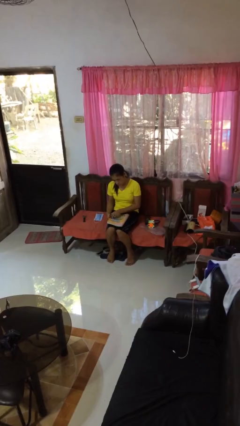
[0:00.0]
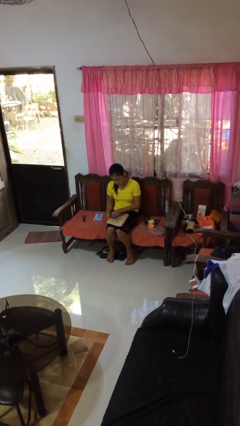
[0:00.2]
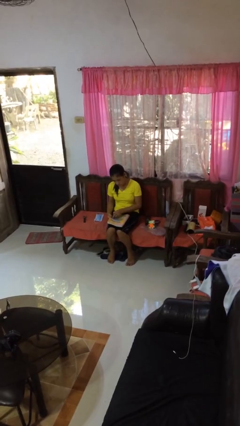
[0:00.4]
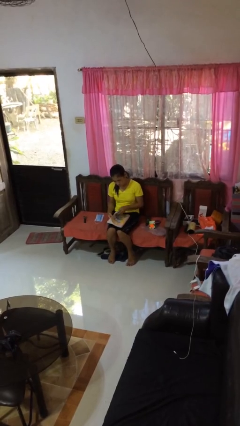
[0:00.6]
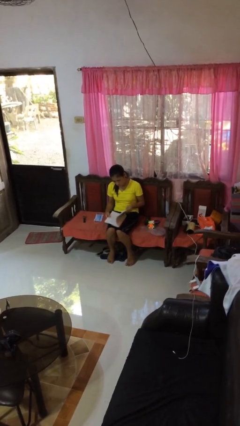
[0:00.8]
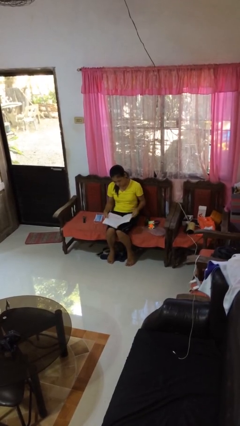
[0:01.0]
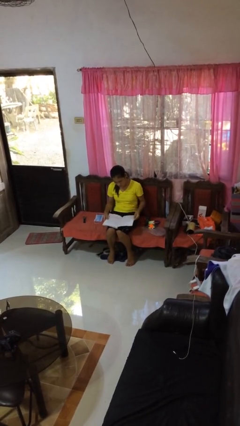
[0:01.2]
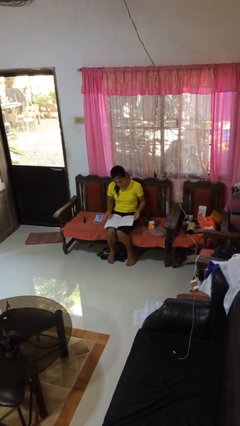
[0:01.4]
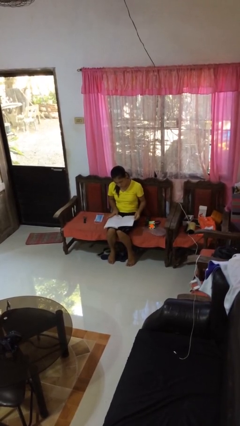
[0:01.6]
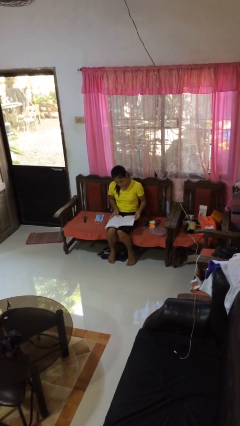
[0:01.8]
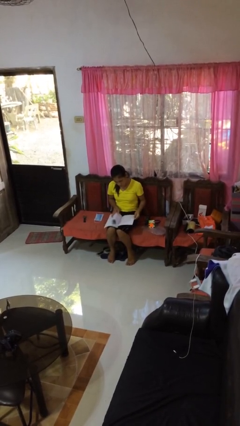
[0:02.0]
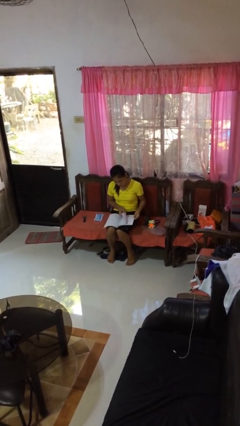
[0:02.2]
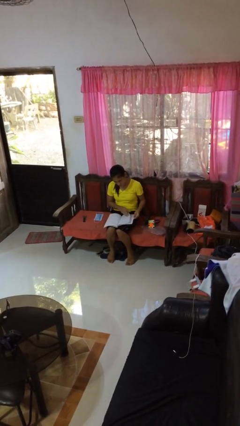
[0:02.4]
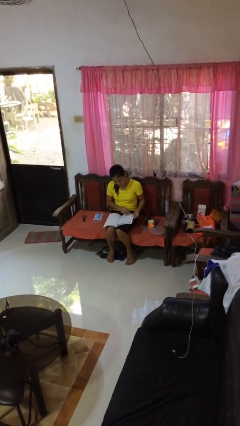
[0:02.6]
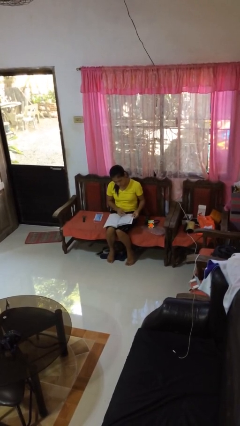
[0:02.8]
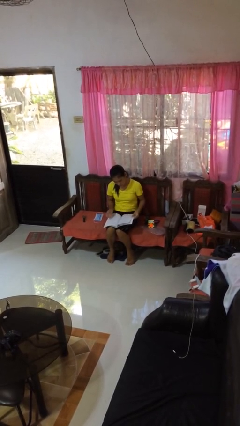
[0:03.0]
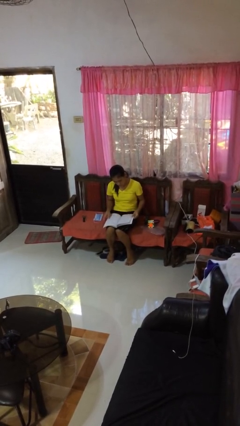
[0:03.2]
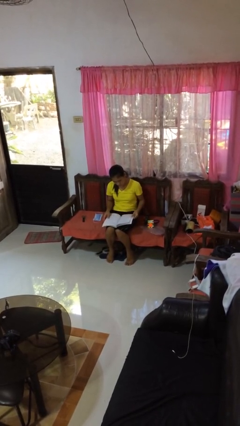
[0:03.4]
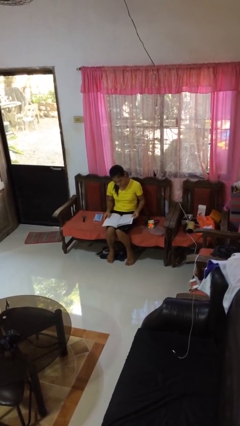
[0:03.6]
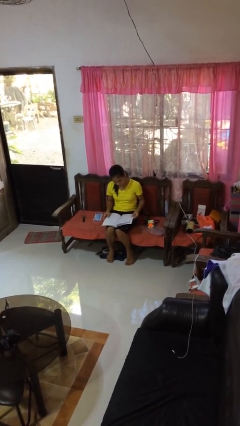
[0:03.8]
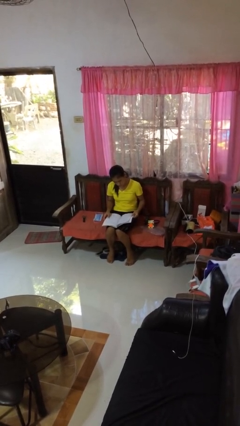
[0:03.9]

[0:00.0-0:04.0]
person reads book

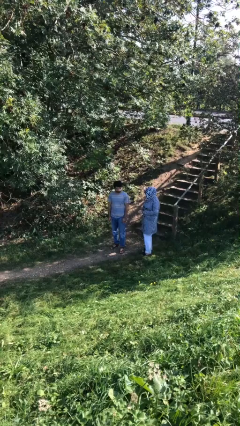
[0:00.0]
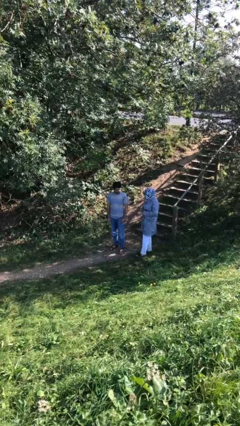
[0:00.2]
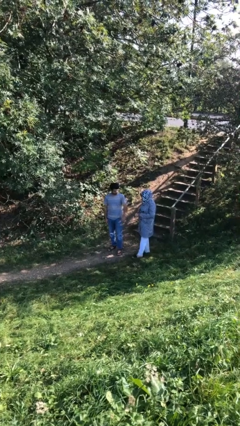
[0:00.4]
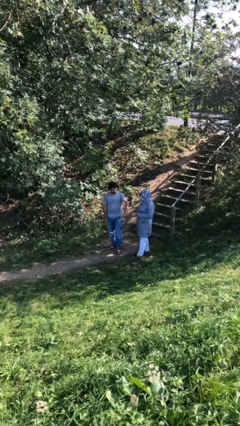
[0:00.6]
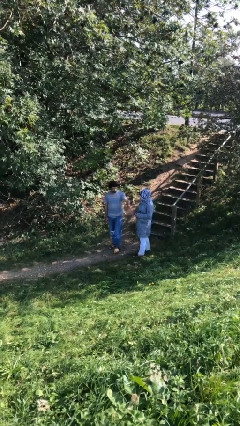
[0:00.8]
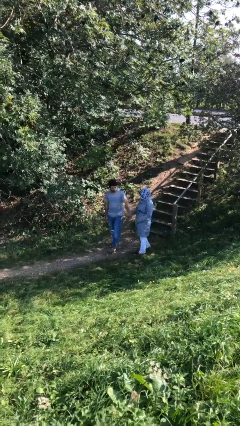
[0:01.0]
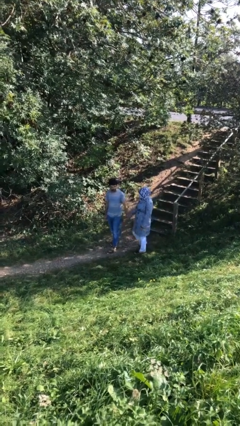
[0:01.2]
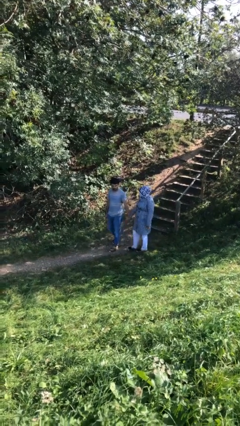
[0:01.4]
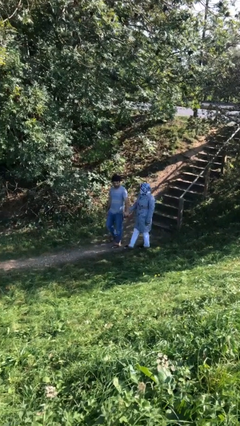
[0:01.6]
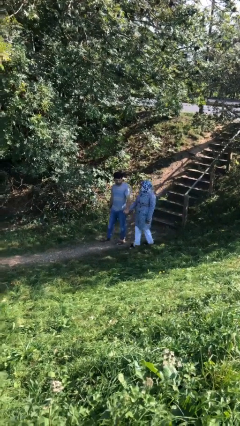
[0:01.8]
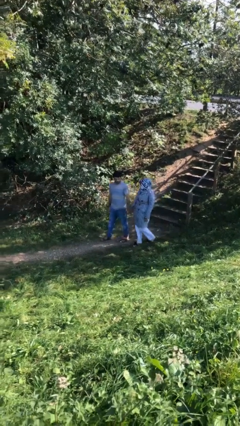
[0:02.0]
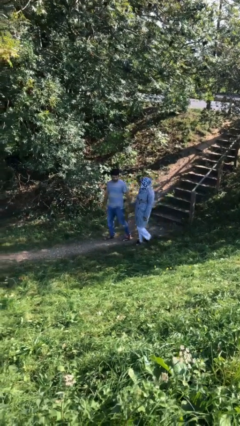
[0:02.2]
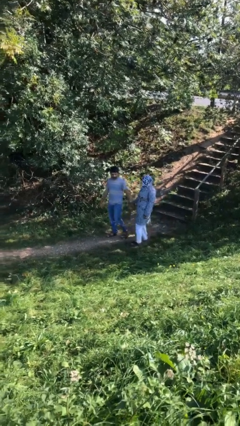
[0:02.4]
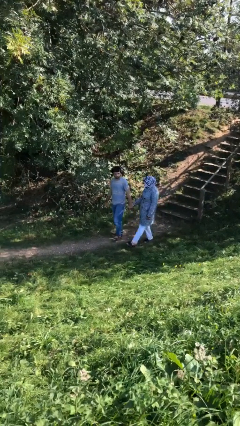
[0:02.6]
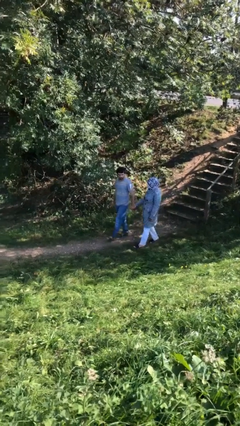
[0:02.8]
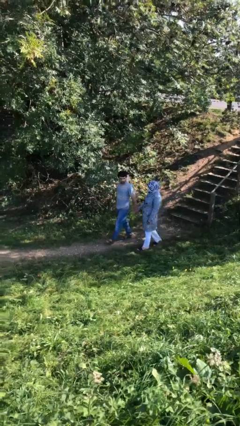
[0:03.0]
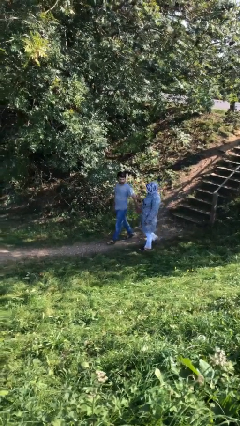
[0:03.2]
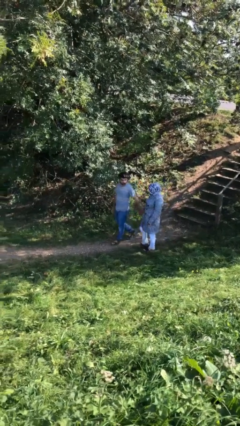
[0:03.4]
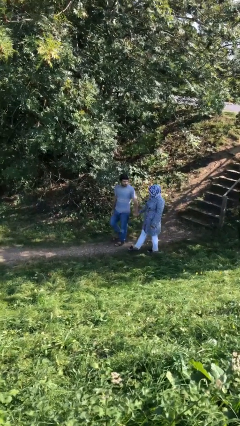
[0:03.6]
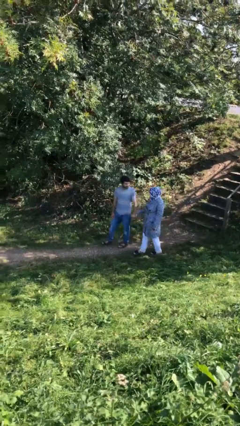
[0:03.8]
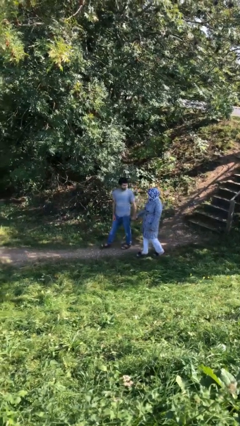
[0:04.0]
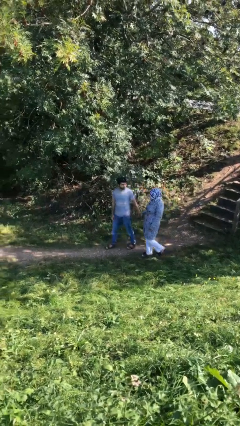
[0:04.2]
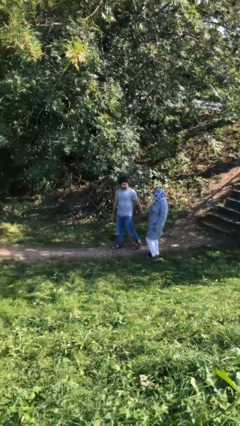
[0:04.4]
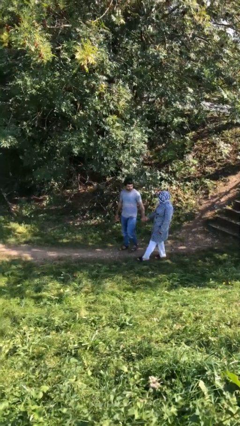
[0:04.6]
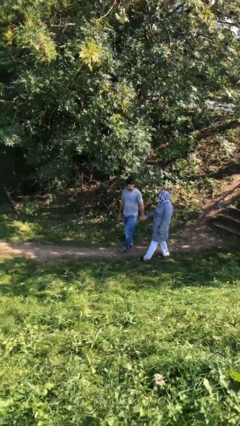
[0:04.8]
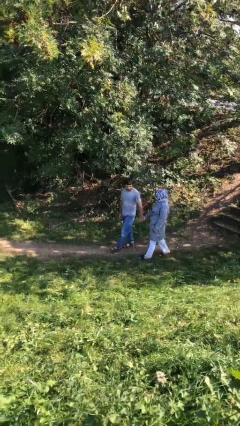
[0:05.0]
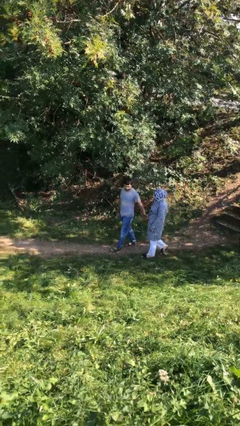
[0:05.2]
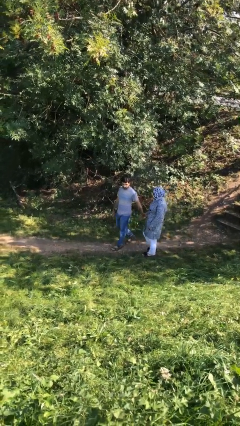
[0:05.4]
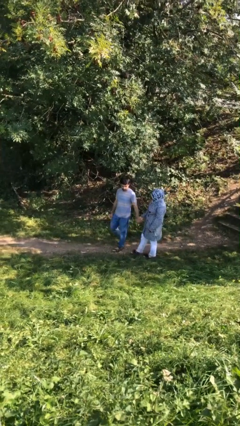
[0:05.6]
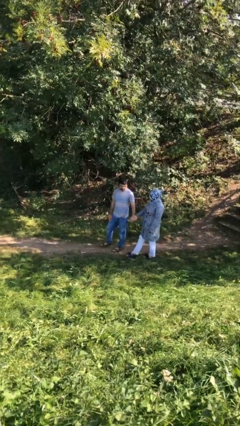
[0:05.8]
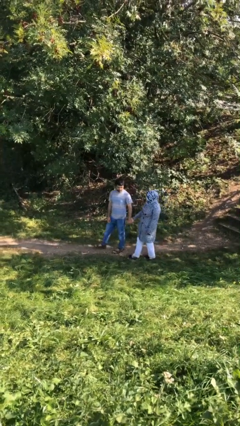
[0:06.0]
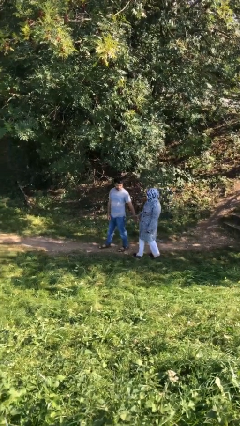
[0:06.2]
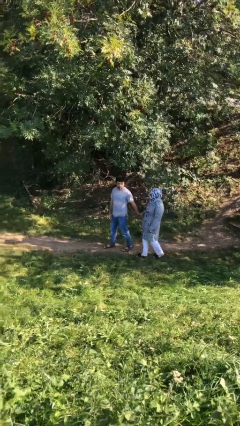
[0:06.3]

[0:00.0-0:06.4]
person holds hand

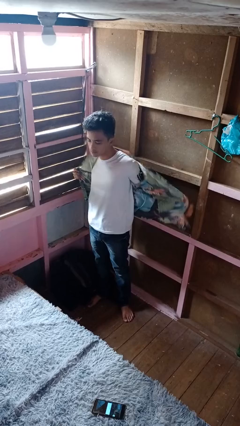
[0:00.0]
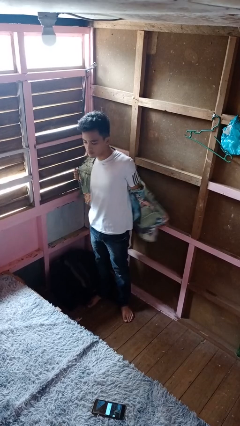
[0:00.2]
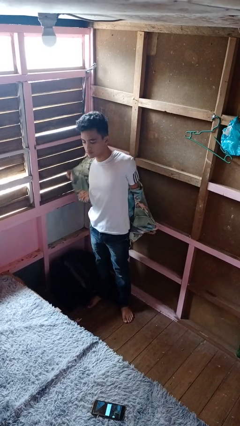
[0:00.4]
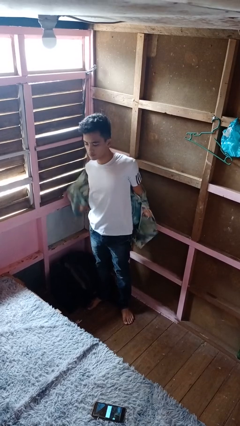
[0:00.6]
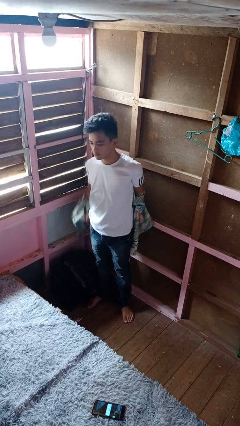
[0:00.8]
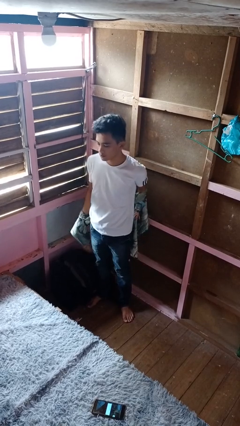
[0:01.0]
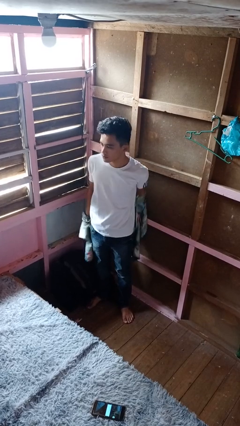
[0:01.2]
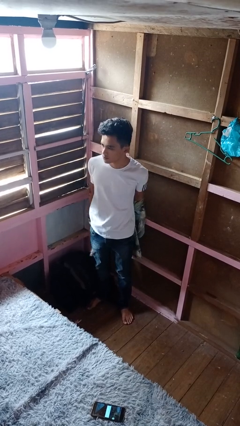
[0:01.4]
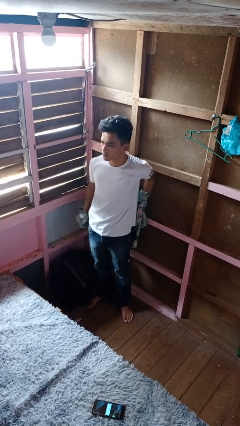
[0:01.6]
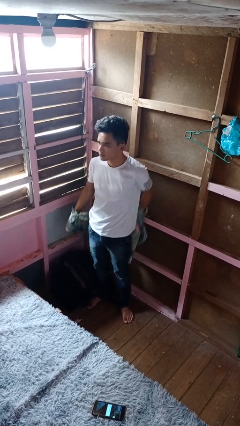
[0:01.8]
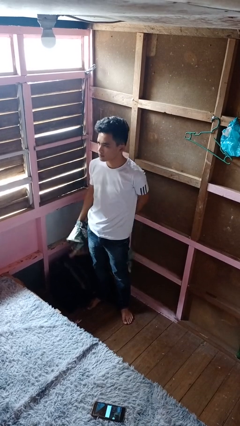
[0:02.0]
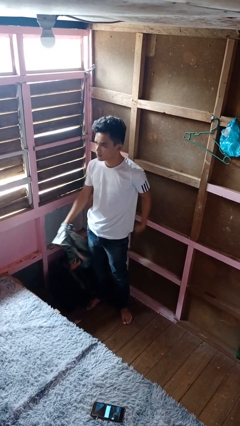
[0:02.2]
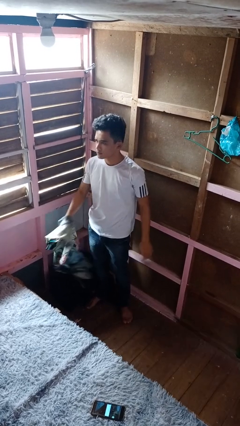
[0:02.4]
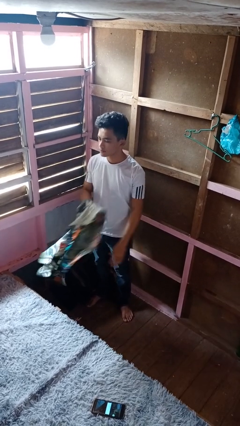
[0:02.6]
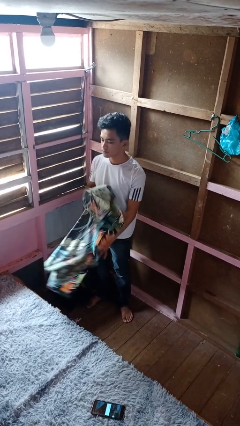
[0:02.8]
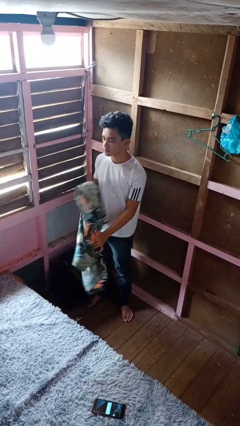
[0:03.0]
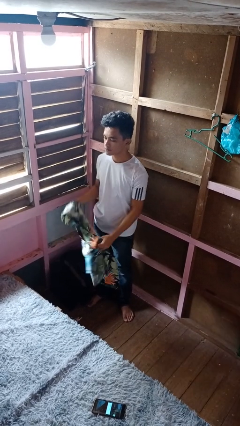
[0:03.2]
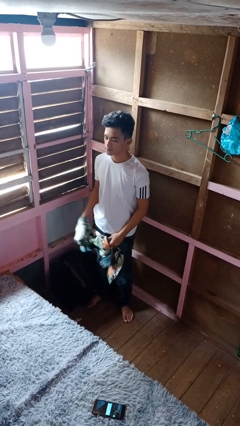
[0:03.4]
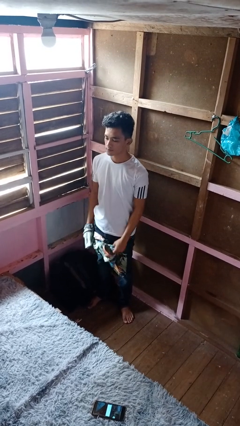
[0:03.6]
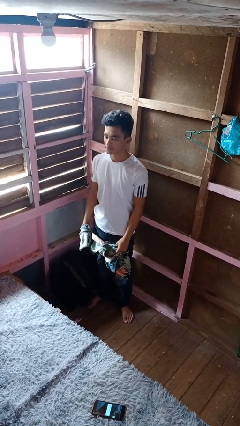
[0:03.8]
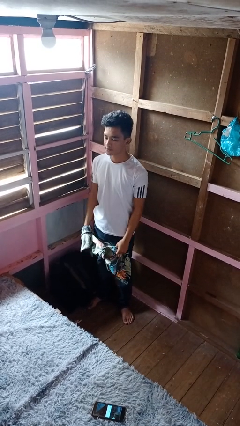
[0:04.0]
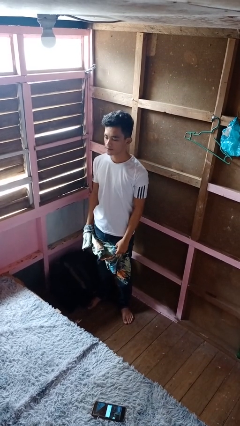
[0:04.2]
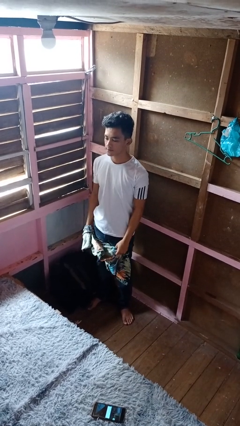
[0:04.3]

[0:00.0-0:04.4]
person takes off shirt

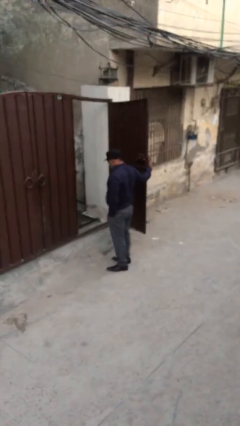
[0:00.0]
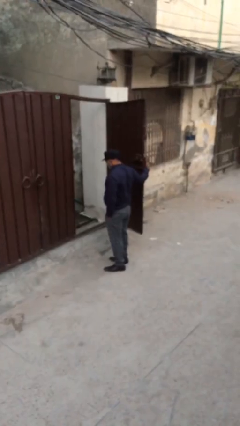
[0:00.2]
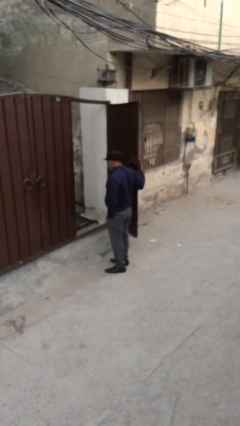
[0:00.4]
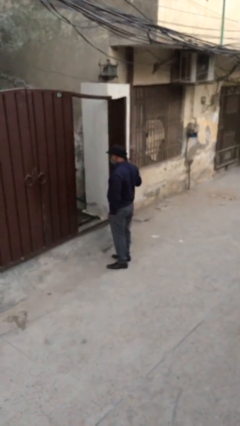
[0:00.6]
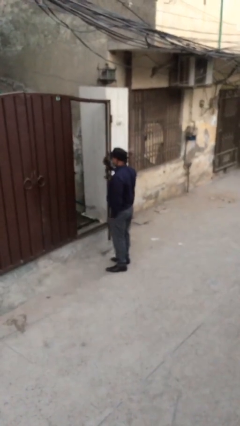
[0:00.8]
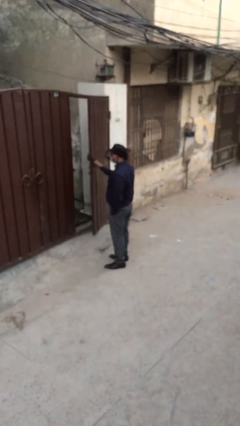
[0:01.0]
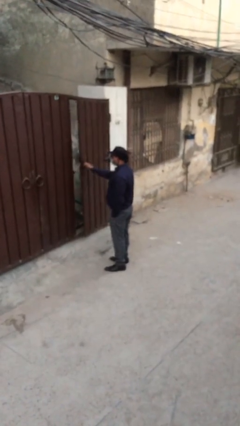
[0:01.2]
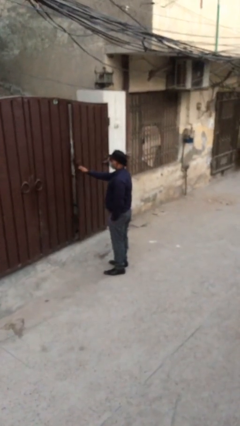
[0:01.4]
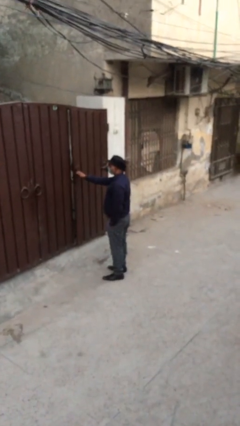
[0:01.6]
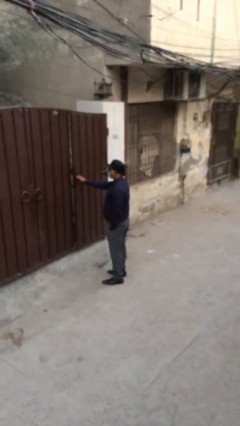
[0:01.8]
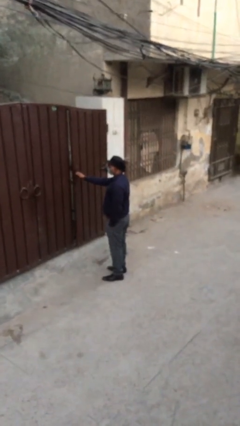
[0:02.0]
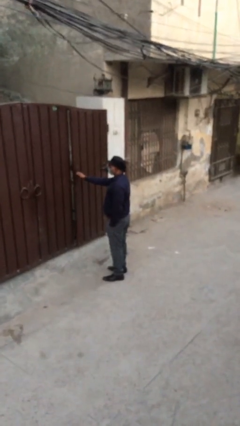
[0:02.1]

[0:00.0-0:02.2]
person closes facility door

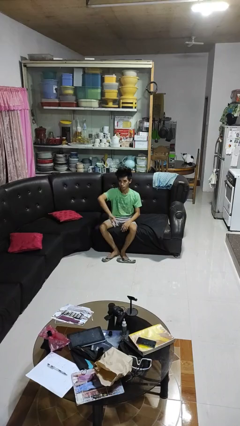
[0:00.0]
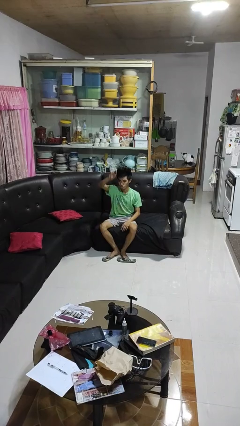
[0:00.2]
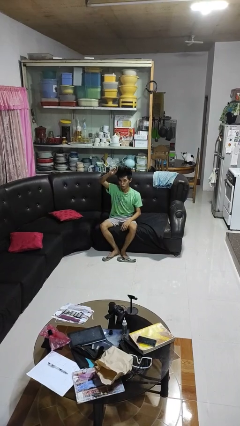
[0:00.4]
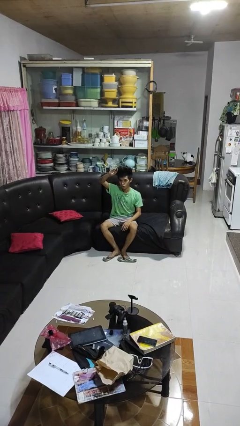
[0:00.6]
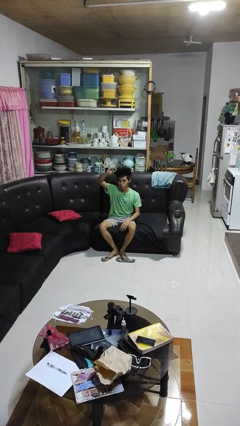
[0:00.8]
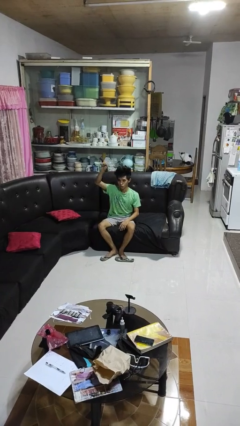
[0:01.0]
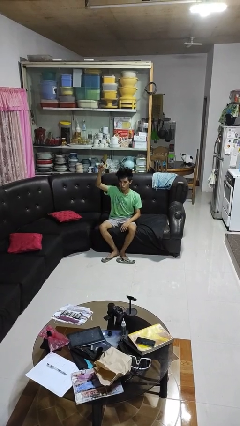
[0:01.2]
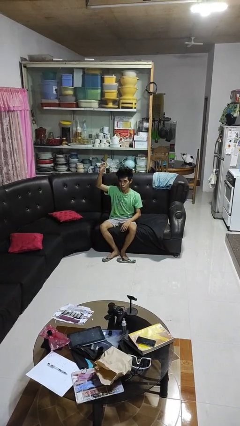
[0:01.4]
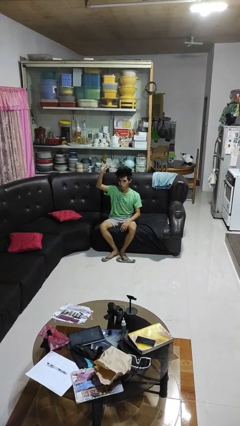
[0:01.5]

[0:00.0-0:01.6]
person gestures swipe up
